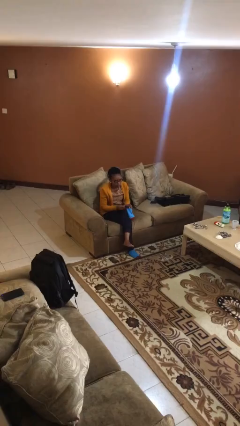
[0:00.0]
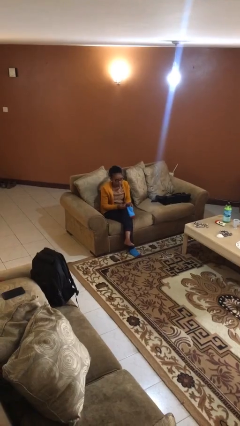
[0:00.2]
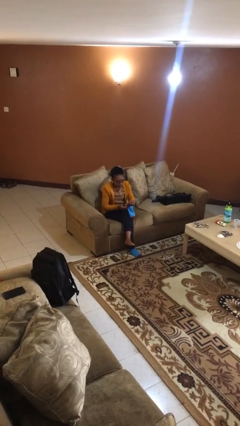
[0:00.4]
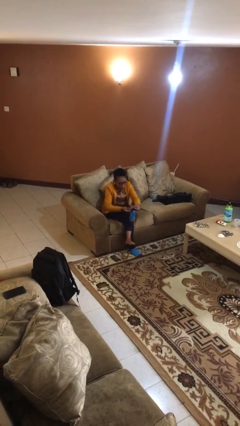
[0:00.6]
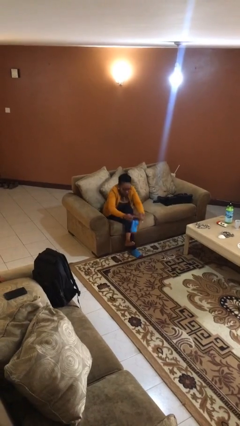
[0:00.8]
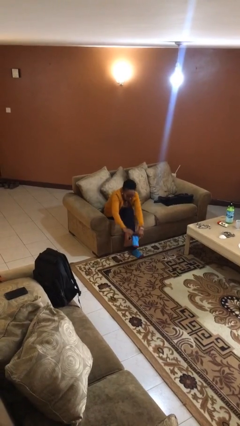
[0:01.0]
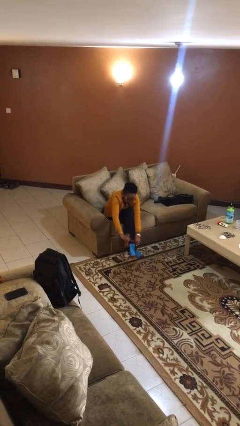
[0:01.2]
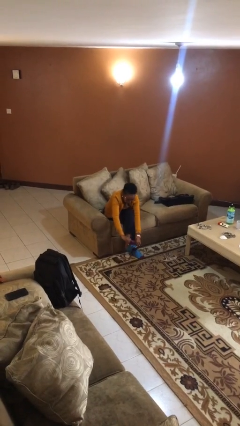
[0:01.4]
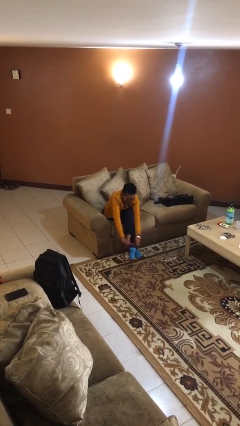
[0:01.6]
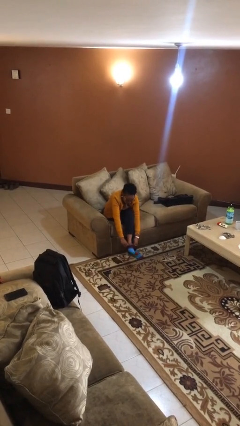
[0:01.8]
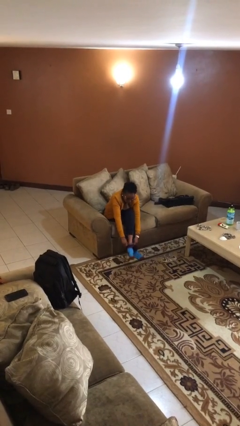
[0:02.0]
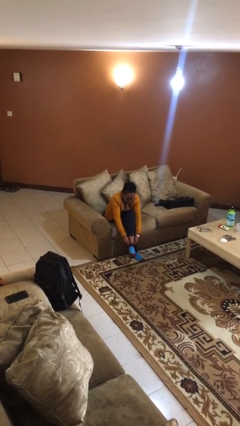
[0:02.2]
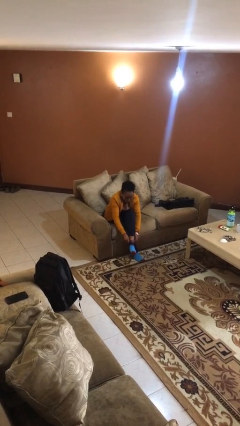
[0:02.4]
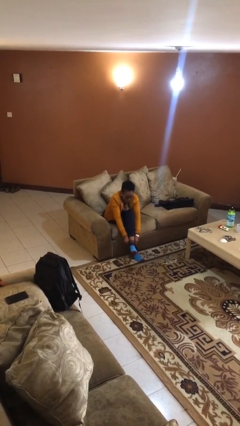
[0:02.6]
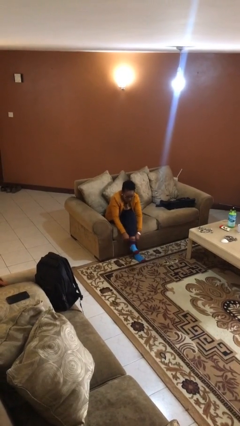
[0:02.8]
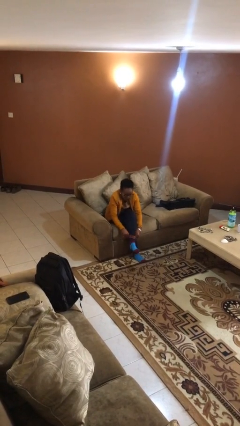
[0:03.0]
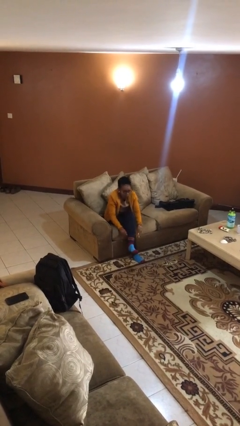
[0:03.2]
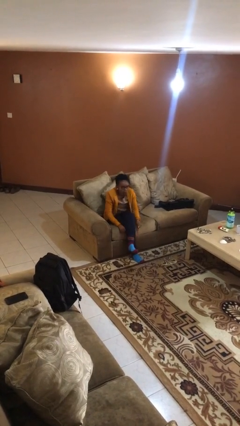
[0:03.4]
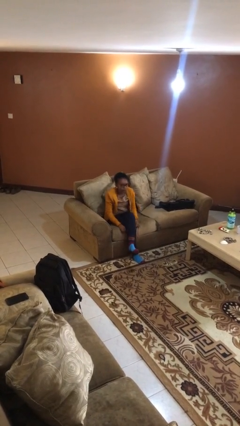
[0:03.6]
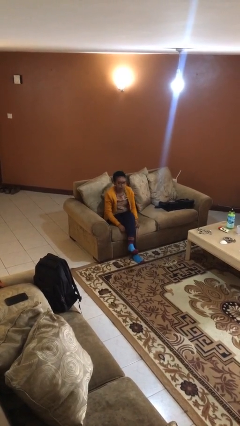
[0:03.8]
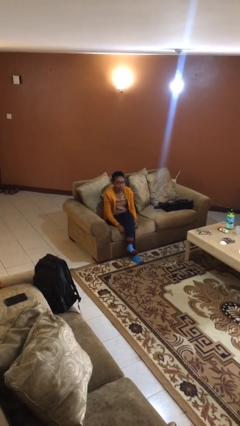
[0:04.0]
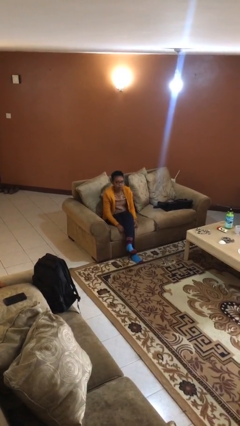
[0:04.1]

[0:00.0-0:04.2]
person puts on socks

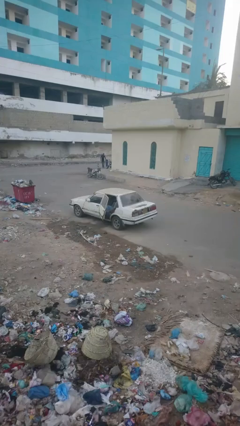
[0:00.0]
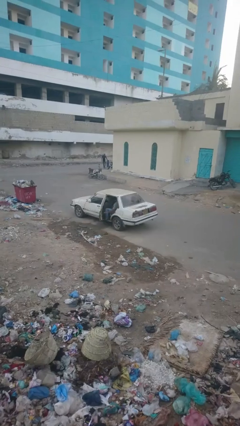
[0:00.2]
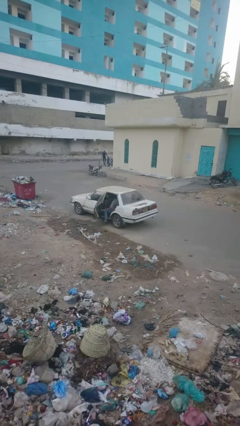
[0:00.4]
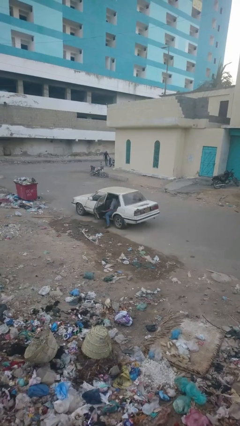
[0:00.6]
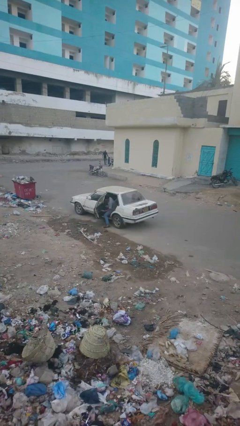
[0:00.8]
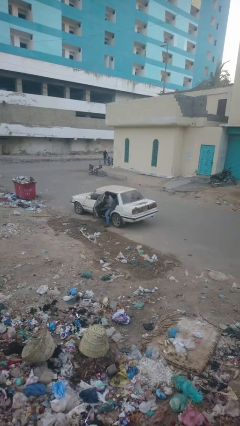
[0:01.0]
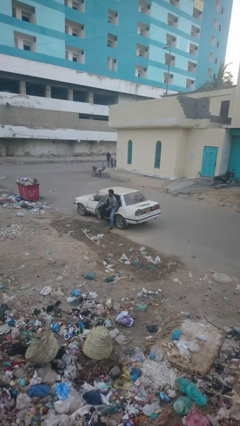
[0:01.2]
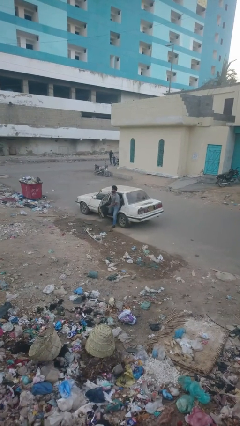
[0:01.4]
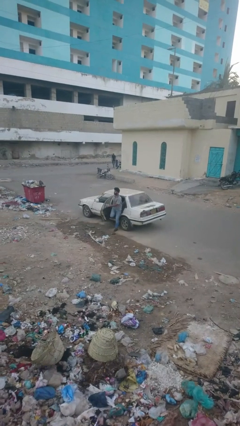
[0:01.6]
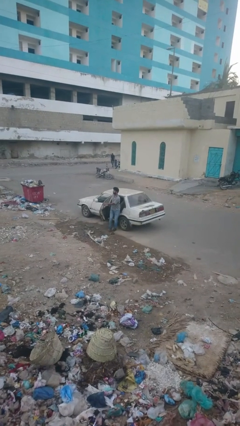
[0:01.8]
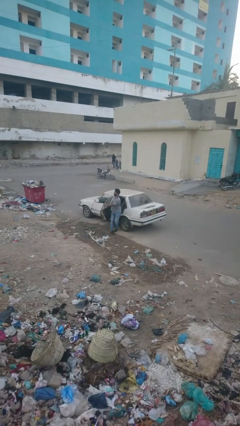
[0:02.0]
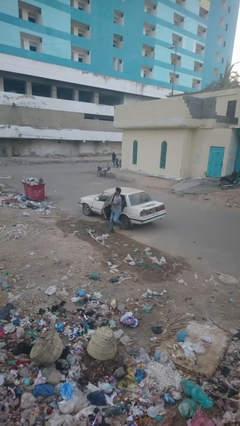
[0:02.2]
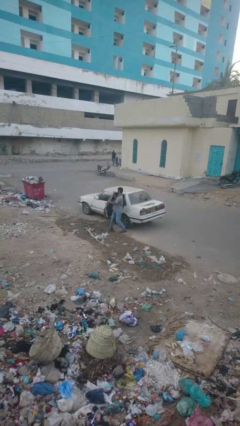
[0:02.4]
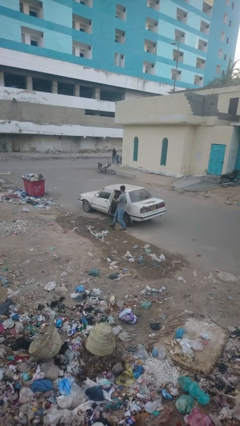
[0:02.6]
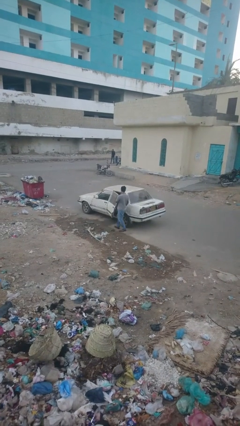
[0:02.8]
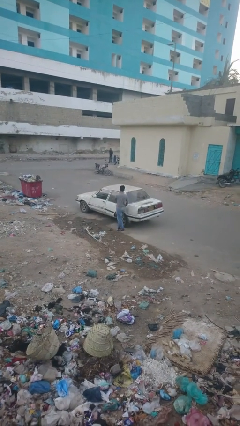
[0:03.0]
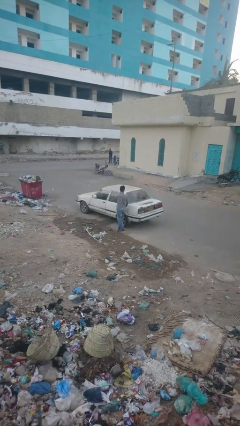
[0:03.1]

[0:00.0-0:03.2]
car drops off person

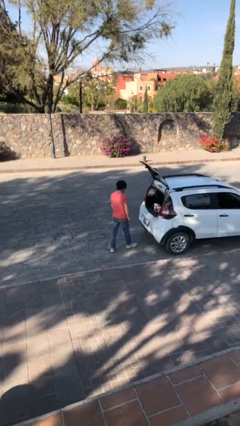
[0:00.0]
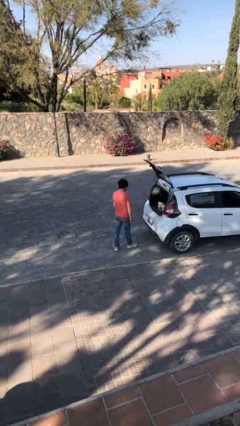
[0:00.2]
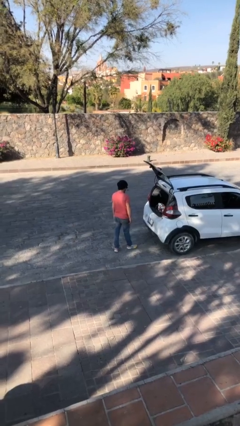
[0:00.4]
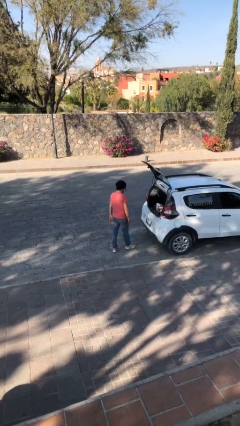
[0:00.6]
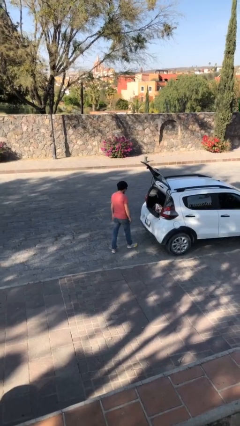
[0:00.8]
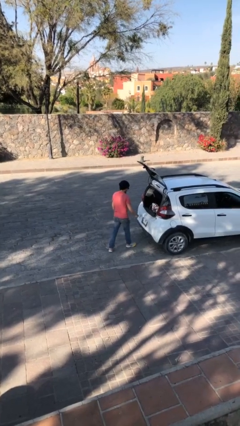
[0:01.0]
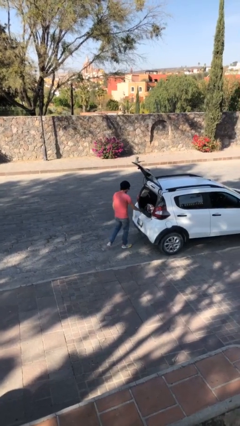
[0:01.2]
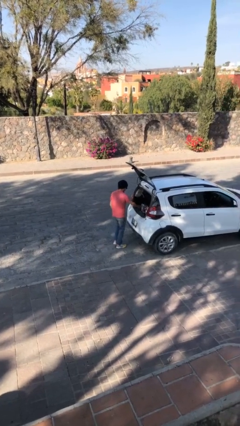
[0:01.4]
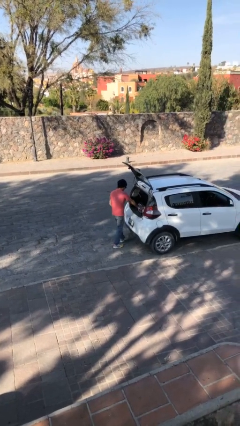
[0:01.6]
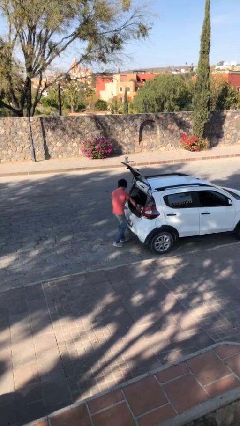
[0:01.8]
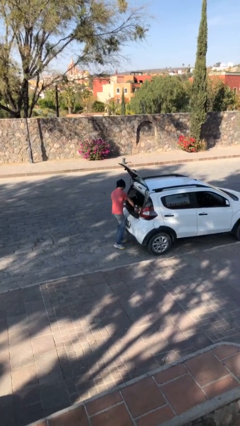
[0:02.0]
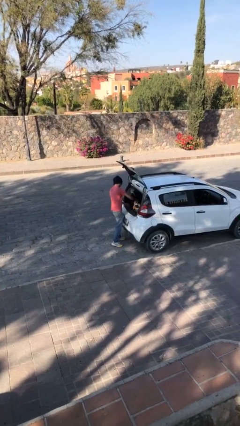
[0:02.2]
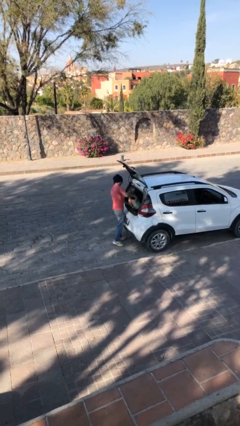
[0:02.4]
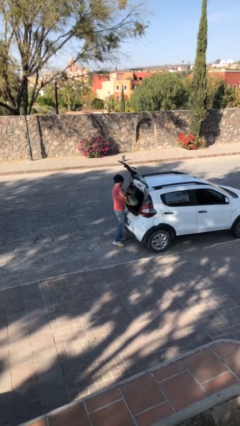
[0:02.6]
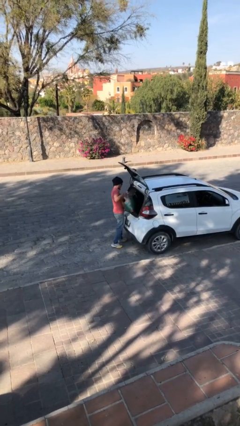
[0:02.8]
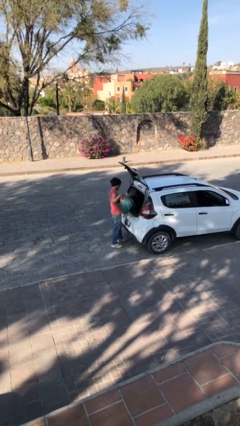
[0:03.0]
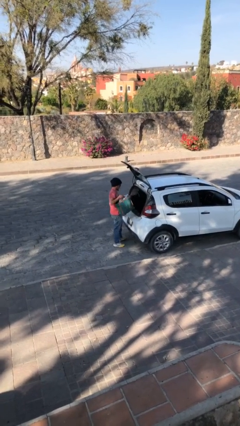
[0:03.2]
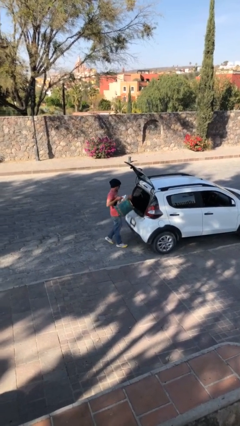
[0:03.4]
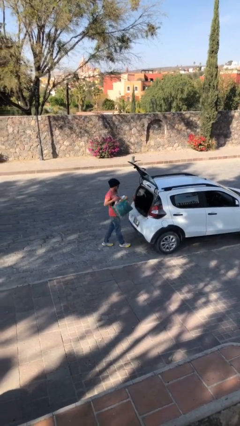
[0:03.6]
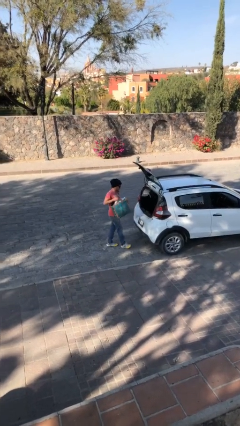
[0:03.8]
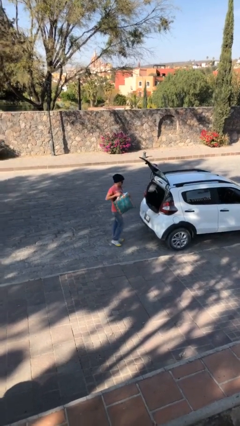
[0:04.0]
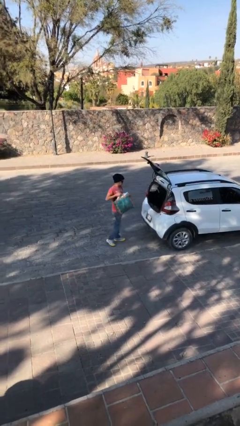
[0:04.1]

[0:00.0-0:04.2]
person unloads car

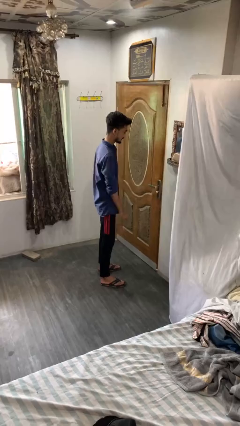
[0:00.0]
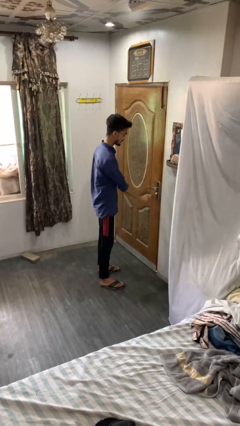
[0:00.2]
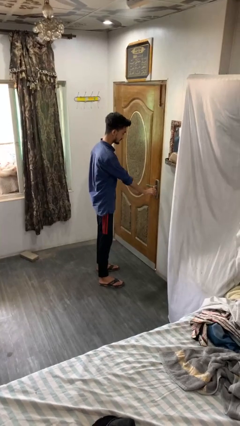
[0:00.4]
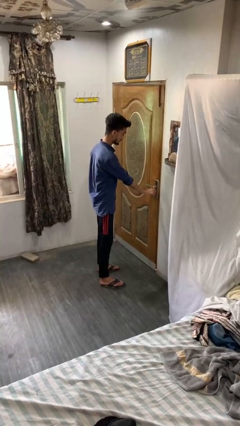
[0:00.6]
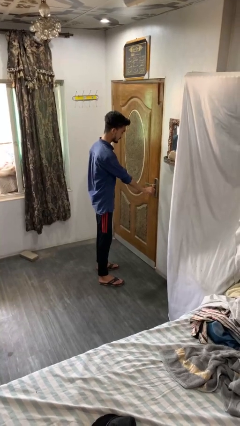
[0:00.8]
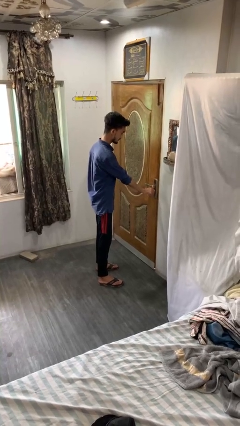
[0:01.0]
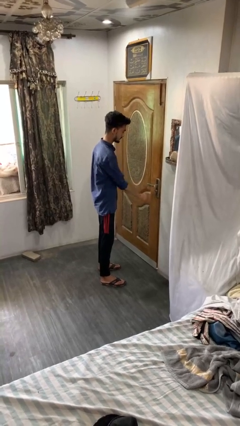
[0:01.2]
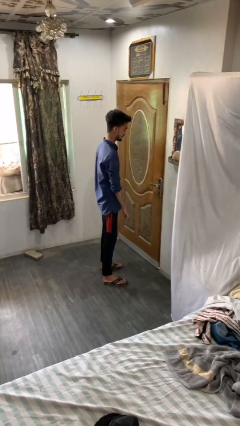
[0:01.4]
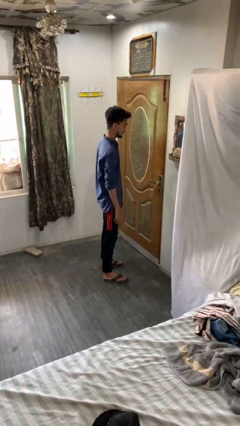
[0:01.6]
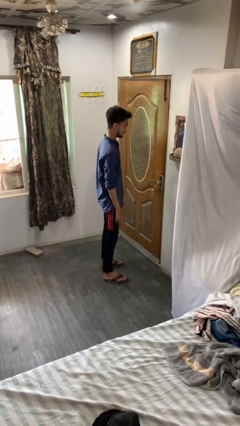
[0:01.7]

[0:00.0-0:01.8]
person locks door with keys

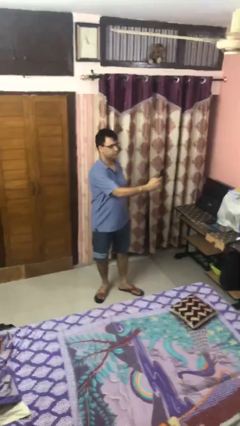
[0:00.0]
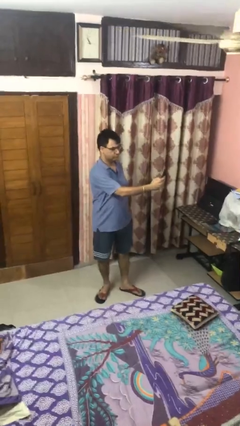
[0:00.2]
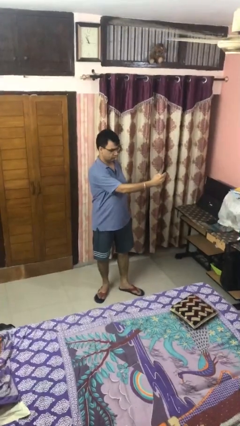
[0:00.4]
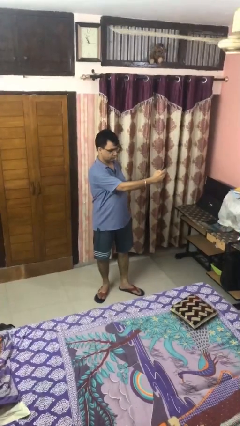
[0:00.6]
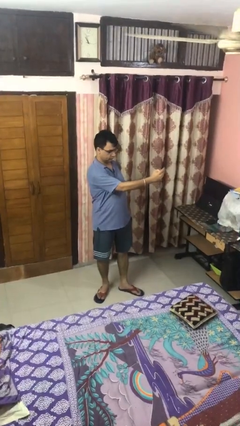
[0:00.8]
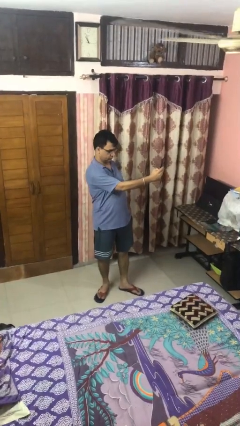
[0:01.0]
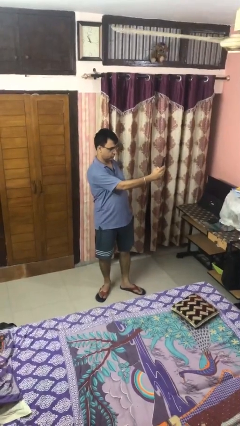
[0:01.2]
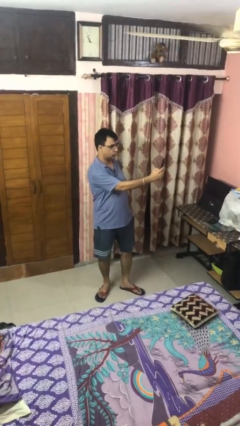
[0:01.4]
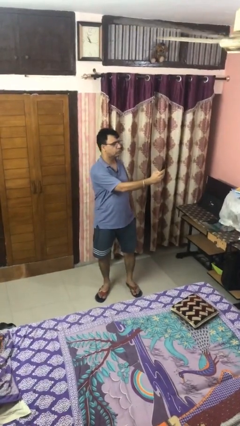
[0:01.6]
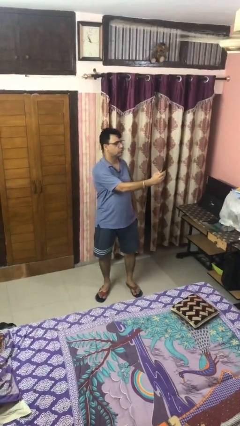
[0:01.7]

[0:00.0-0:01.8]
person takes selfie

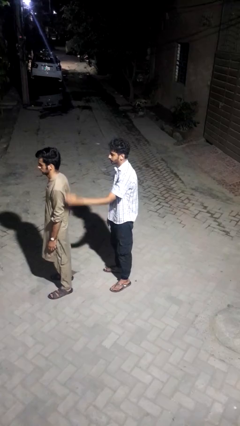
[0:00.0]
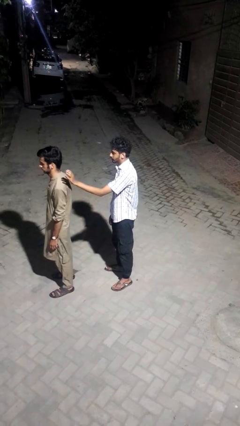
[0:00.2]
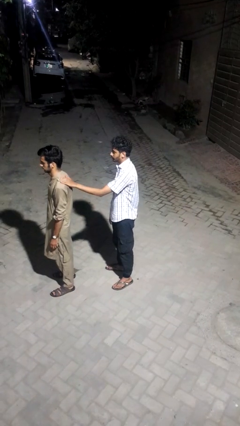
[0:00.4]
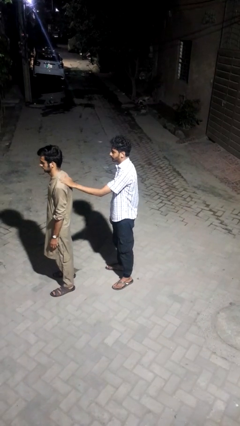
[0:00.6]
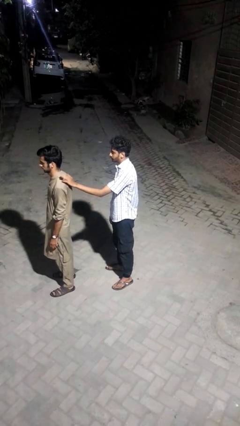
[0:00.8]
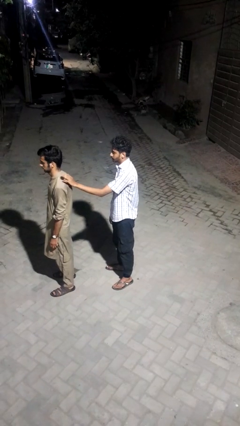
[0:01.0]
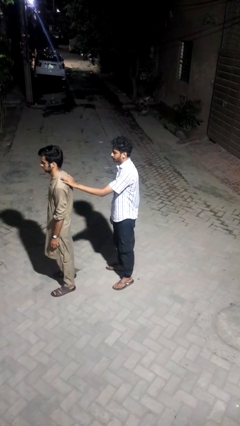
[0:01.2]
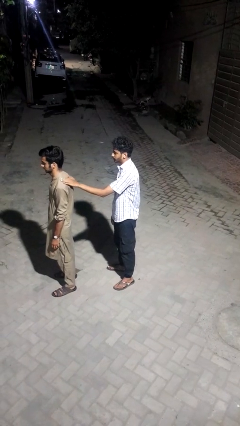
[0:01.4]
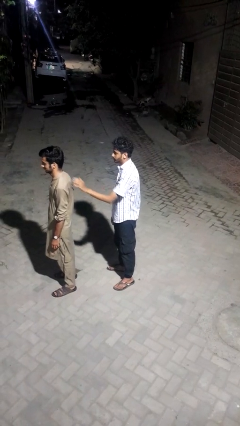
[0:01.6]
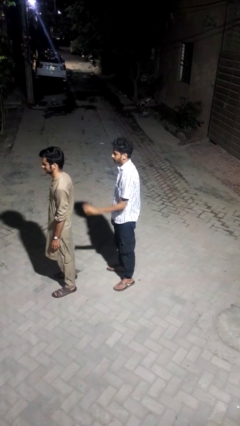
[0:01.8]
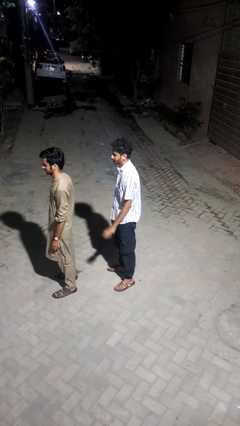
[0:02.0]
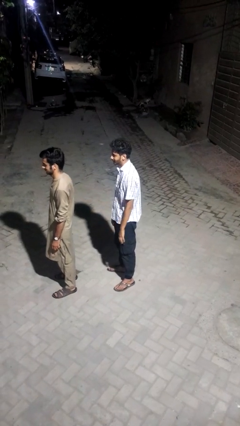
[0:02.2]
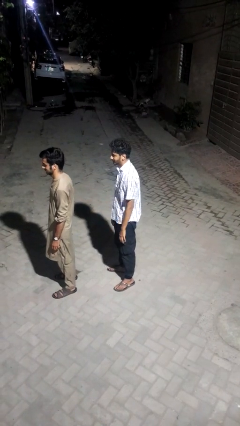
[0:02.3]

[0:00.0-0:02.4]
person touches back of person
